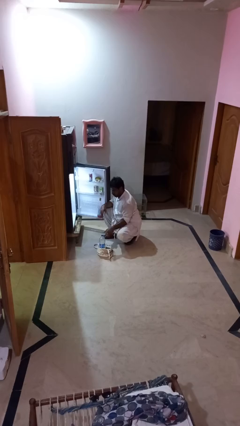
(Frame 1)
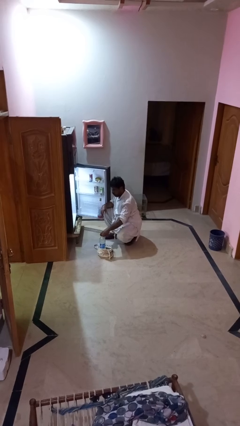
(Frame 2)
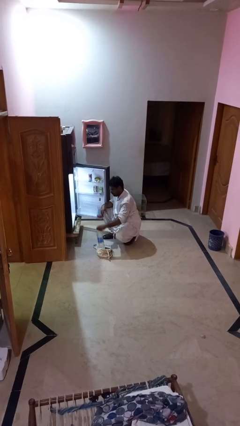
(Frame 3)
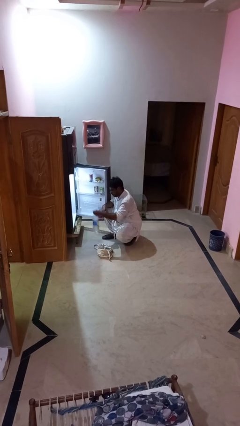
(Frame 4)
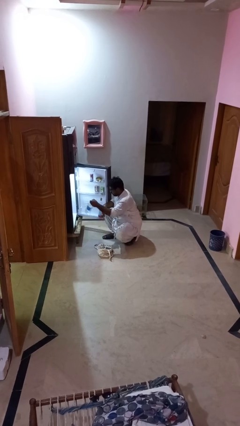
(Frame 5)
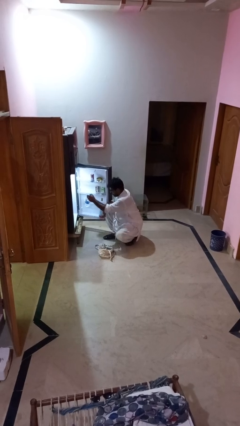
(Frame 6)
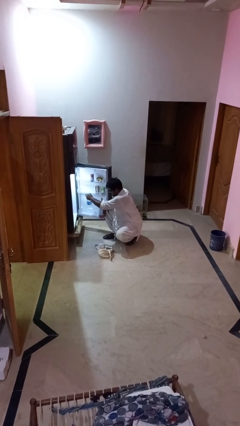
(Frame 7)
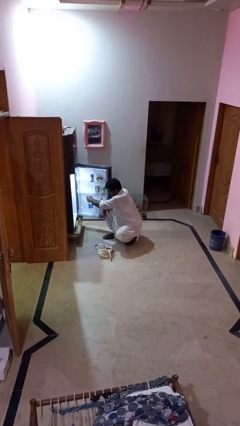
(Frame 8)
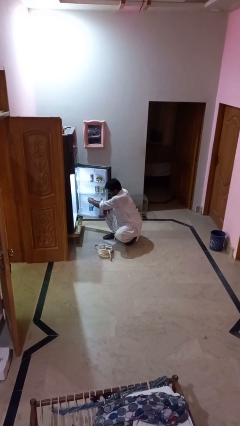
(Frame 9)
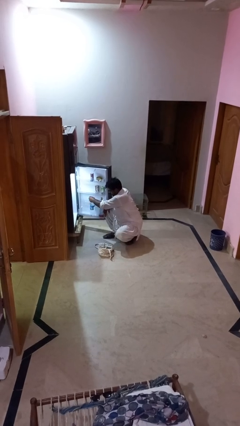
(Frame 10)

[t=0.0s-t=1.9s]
person loads groceries into refrigerator

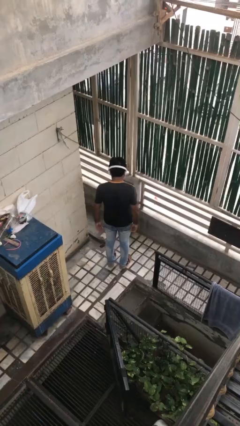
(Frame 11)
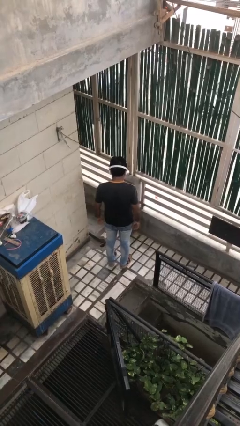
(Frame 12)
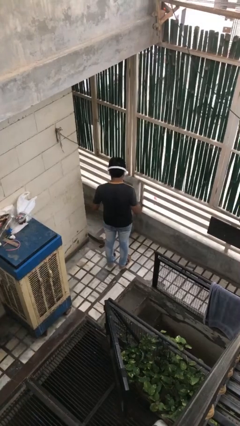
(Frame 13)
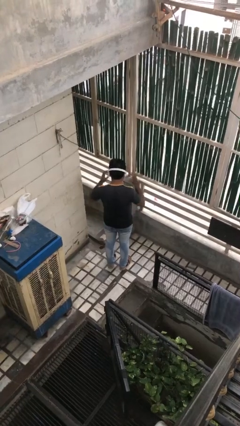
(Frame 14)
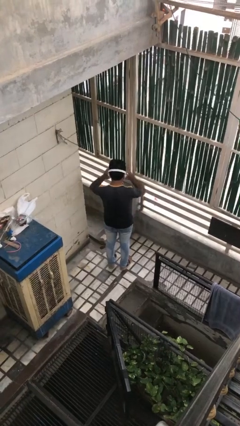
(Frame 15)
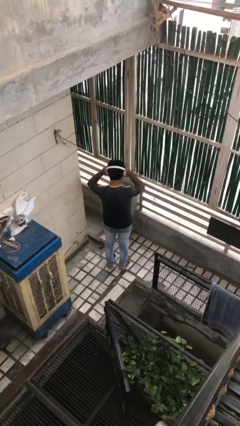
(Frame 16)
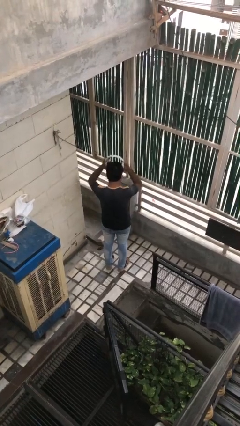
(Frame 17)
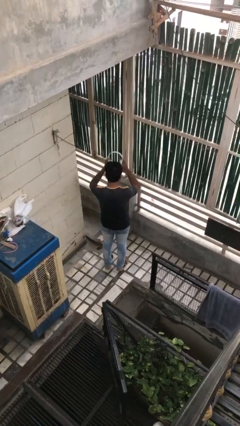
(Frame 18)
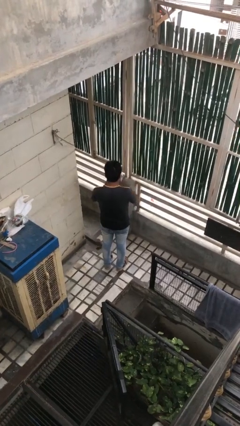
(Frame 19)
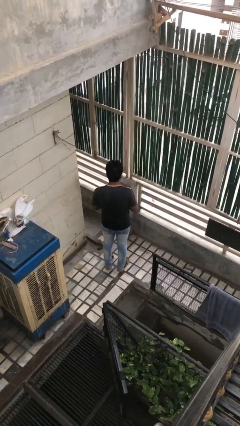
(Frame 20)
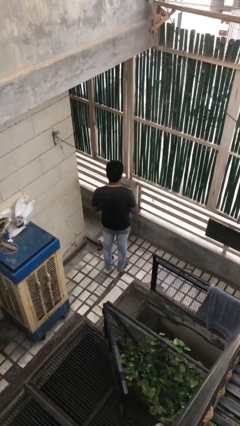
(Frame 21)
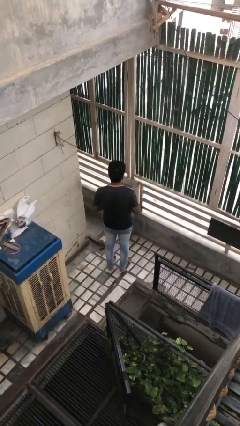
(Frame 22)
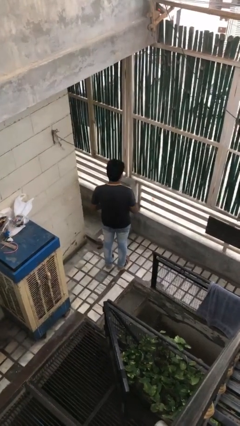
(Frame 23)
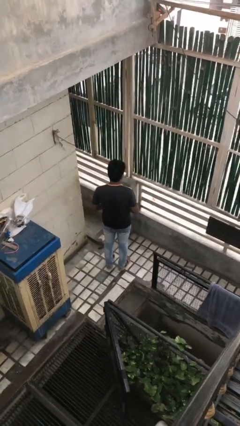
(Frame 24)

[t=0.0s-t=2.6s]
person takes off headphones

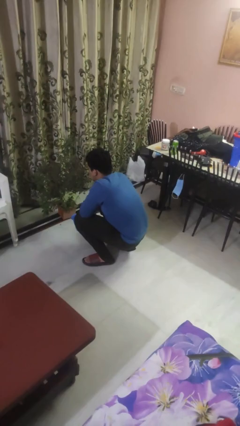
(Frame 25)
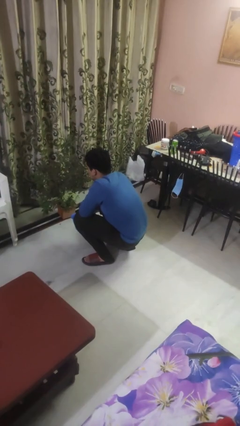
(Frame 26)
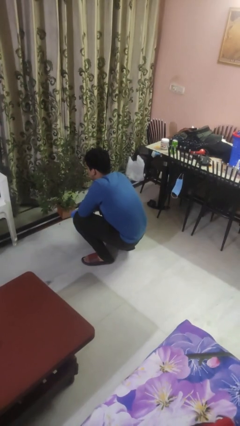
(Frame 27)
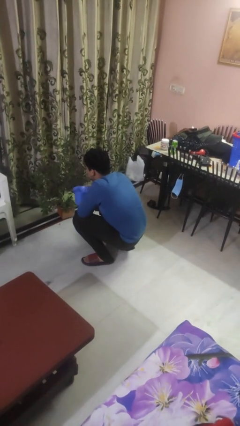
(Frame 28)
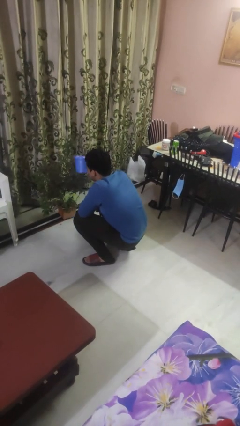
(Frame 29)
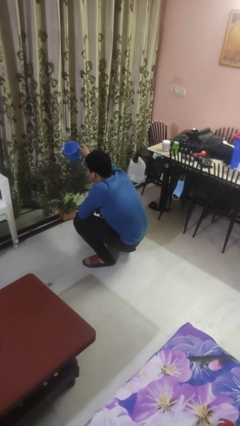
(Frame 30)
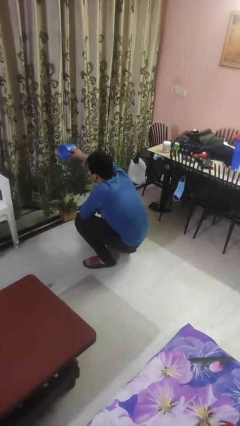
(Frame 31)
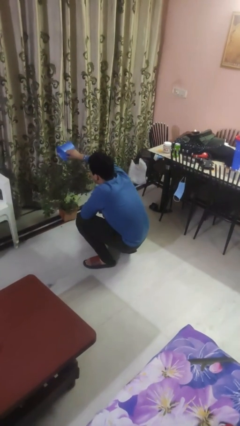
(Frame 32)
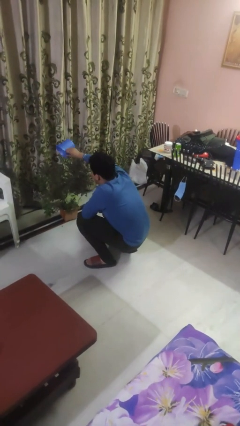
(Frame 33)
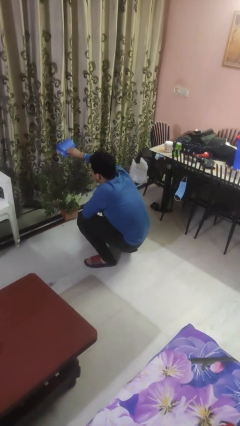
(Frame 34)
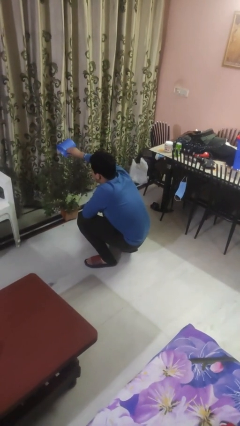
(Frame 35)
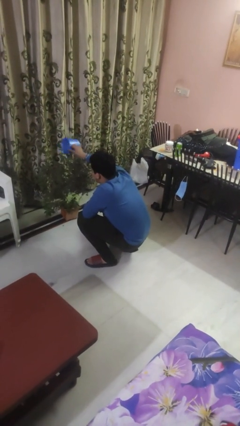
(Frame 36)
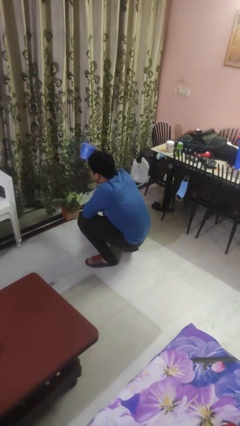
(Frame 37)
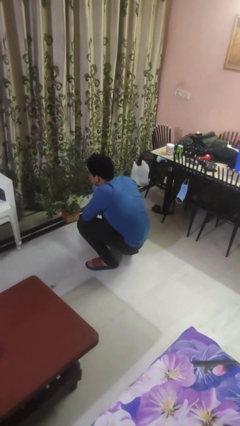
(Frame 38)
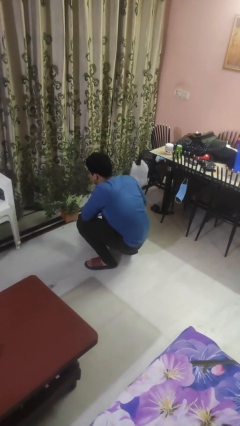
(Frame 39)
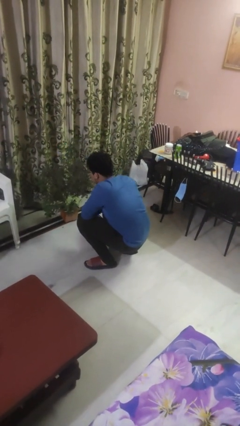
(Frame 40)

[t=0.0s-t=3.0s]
person waters houseplant

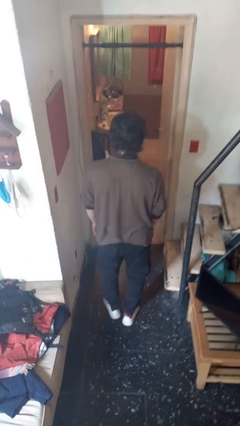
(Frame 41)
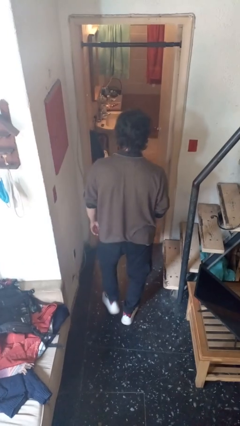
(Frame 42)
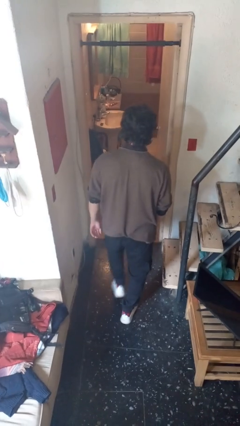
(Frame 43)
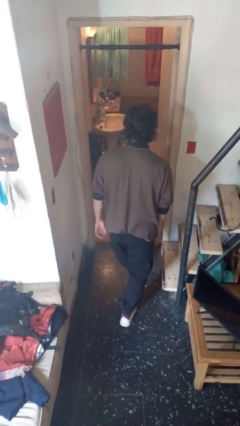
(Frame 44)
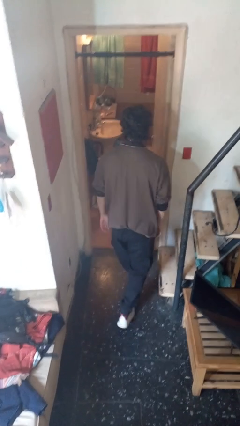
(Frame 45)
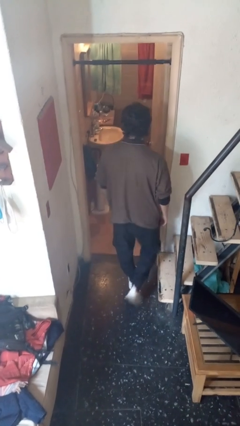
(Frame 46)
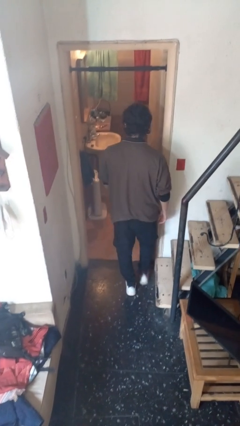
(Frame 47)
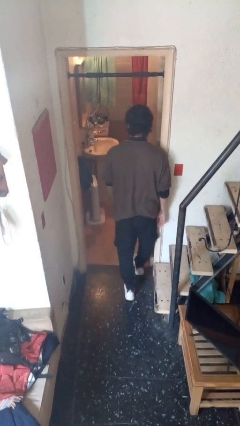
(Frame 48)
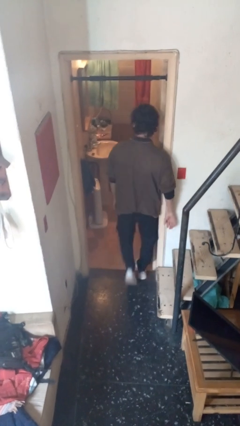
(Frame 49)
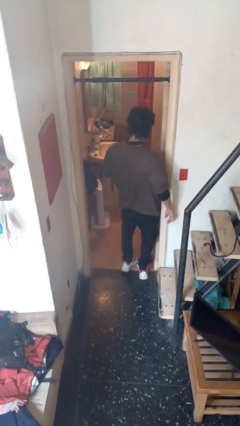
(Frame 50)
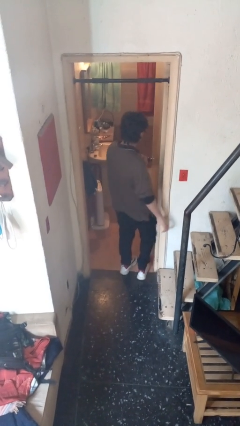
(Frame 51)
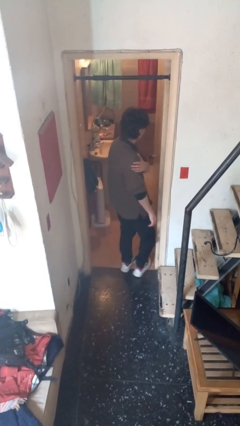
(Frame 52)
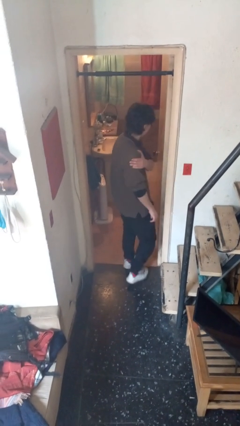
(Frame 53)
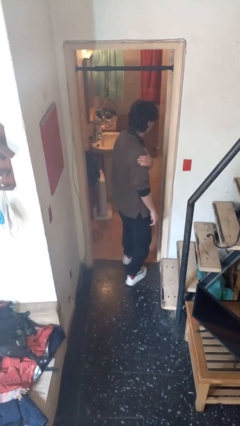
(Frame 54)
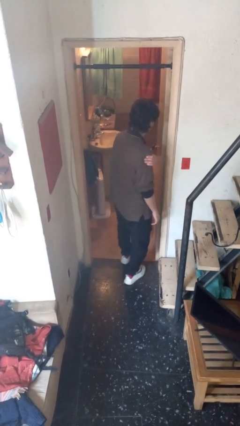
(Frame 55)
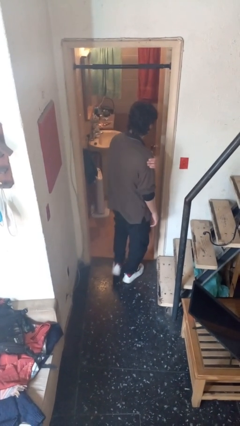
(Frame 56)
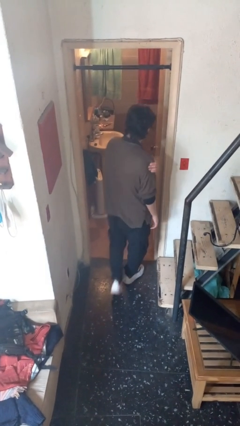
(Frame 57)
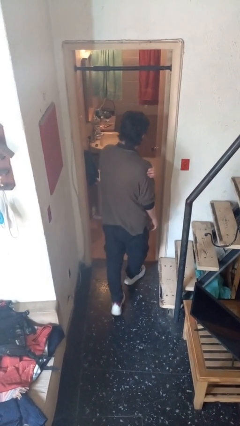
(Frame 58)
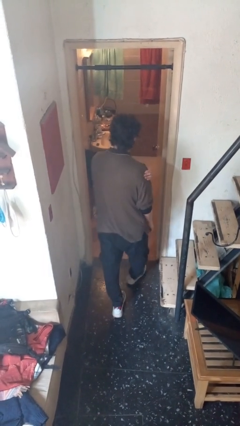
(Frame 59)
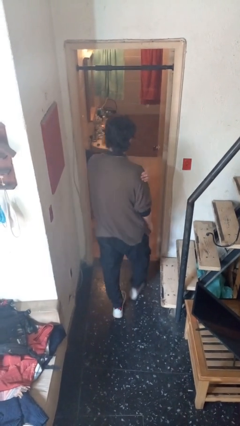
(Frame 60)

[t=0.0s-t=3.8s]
person bumps into wall

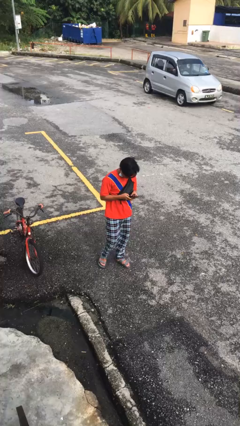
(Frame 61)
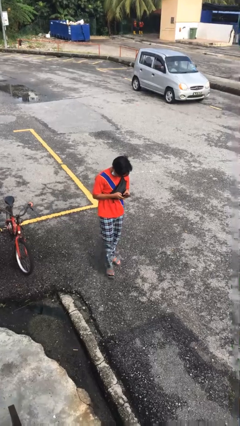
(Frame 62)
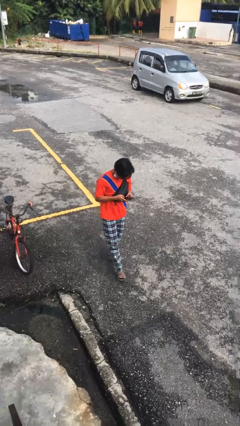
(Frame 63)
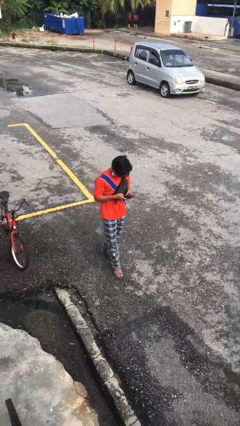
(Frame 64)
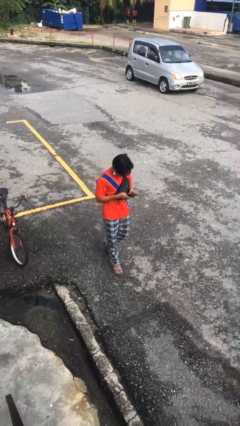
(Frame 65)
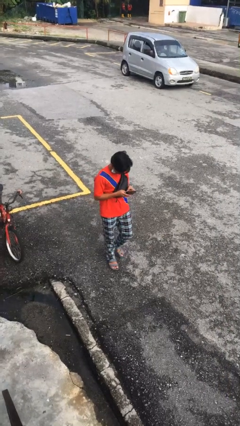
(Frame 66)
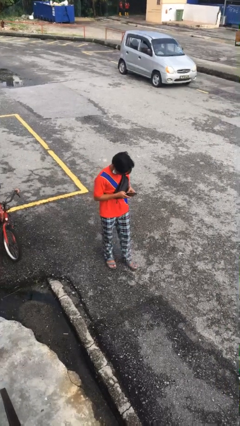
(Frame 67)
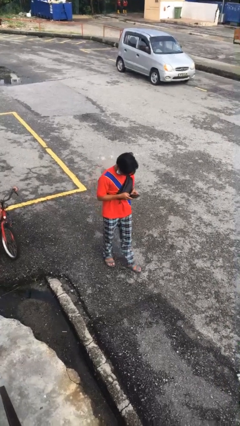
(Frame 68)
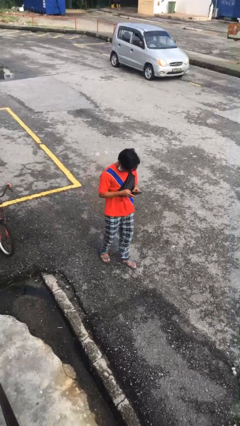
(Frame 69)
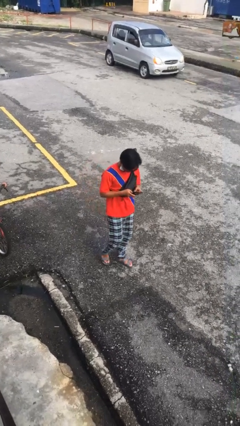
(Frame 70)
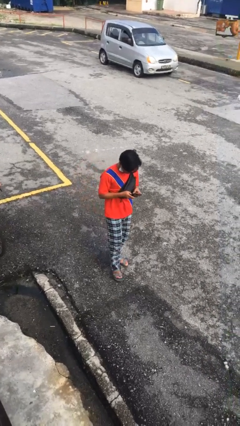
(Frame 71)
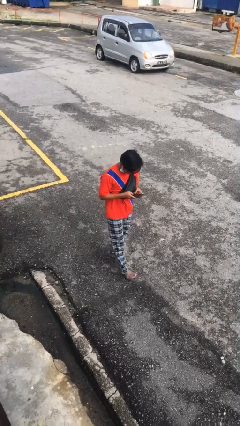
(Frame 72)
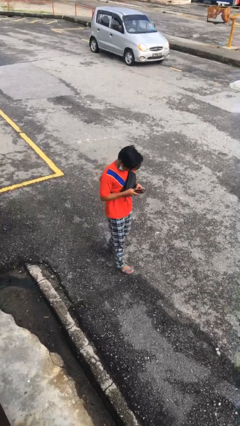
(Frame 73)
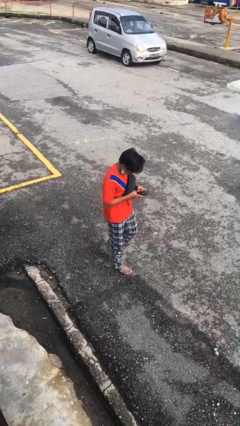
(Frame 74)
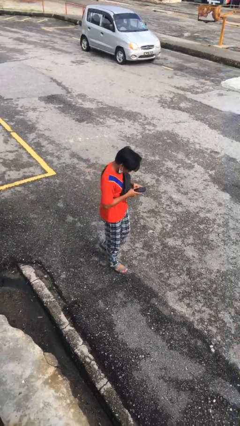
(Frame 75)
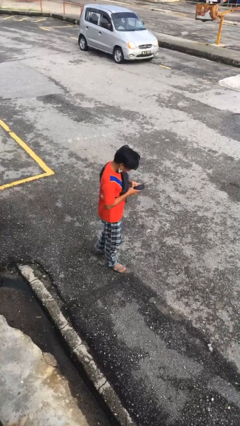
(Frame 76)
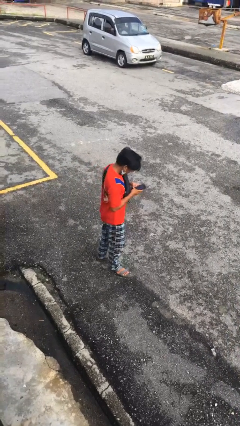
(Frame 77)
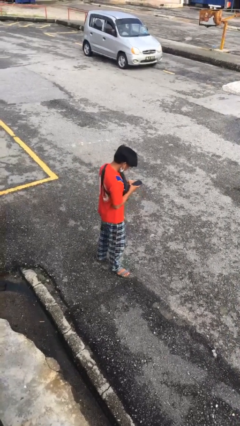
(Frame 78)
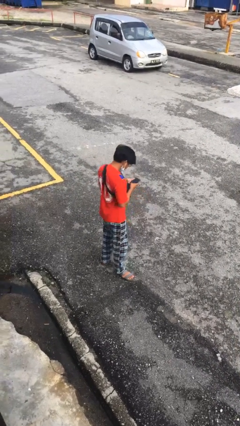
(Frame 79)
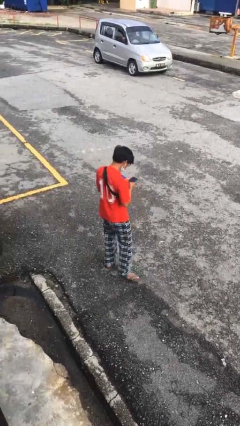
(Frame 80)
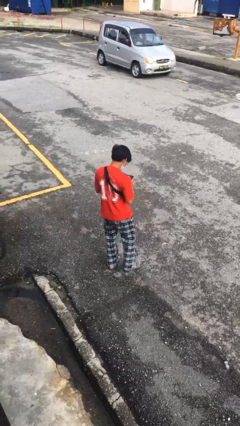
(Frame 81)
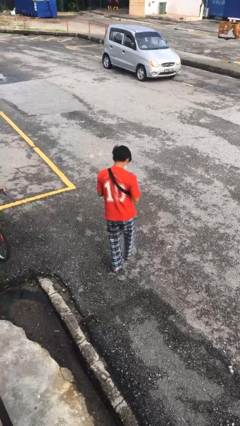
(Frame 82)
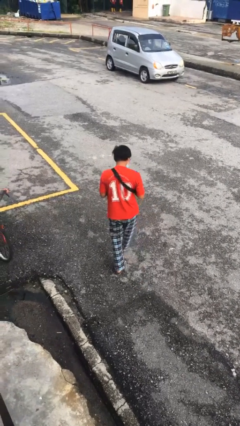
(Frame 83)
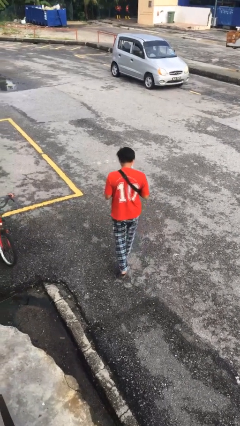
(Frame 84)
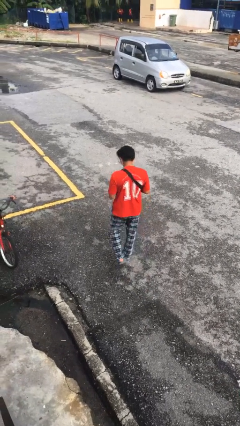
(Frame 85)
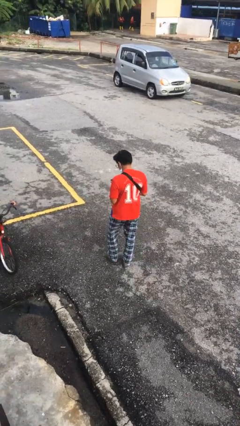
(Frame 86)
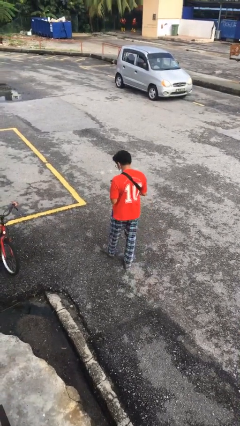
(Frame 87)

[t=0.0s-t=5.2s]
person texts on phone

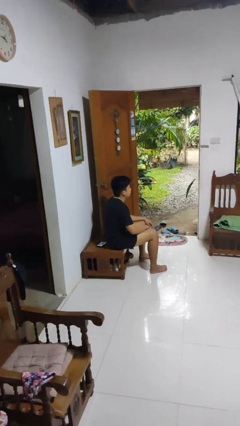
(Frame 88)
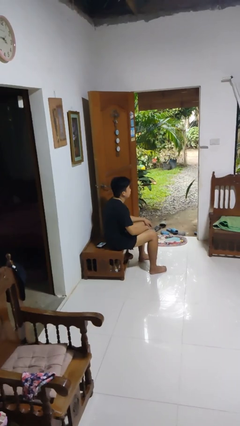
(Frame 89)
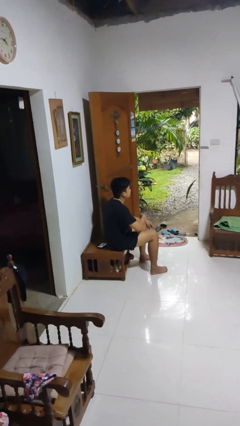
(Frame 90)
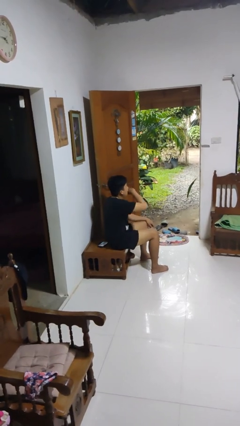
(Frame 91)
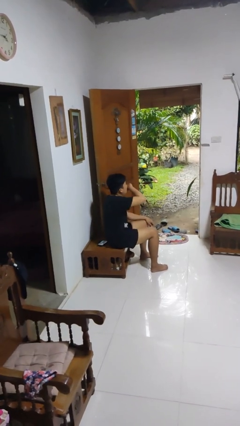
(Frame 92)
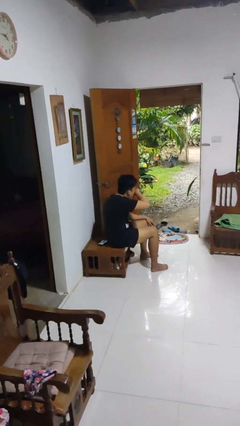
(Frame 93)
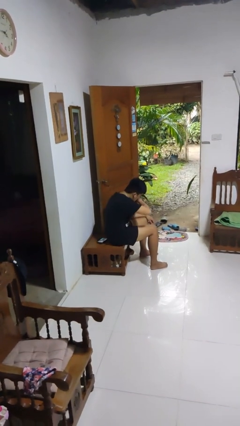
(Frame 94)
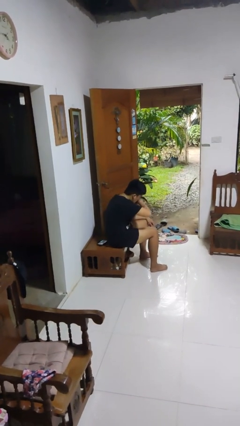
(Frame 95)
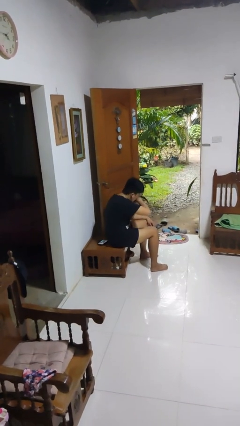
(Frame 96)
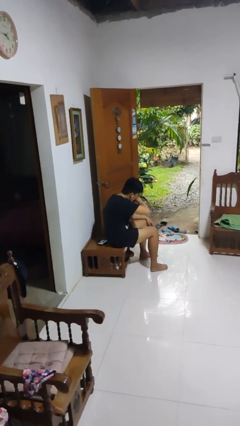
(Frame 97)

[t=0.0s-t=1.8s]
person sneezes into arm
